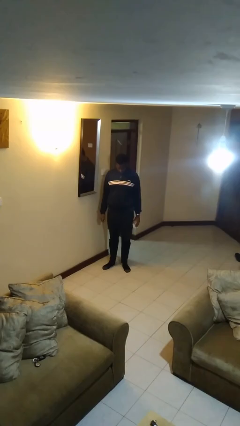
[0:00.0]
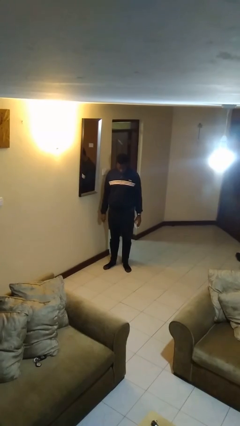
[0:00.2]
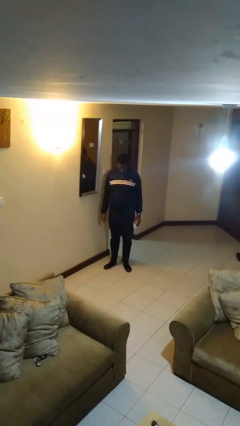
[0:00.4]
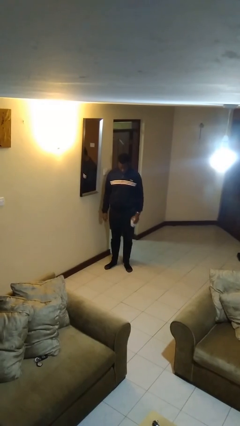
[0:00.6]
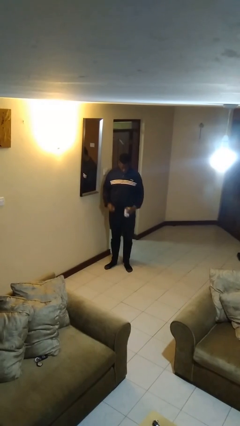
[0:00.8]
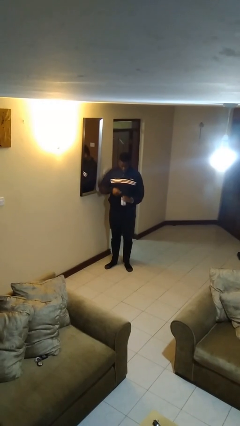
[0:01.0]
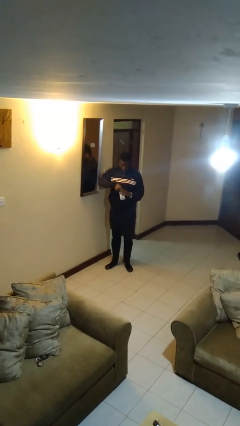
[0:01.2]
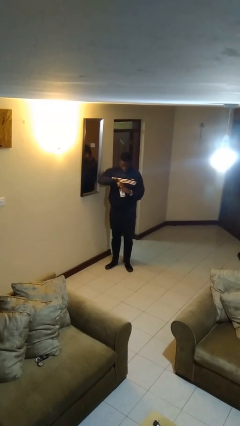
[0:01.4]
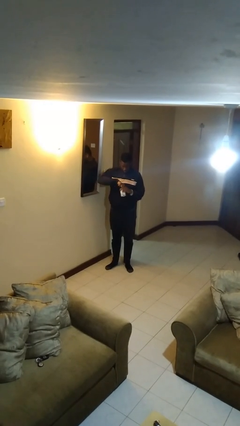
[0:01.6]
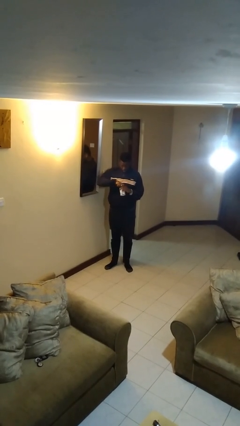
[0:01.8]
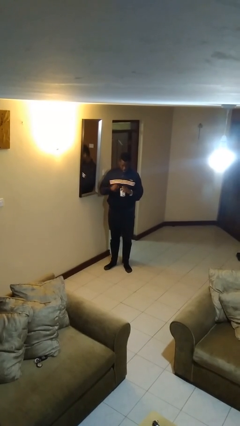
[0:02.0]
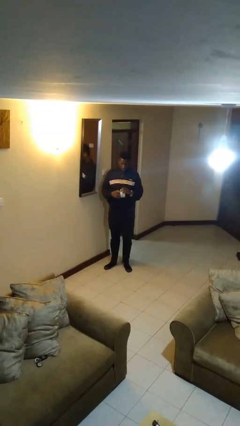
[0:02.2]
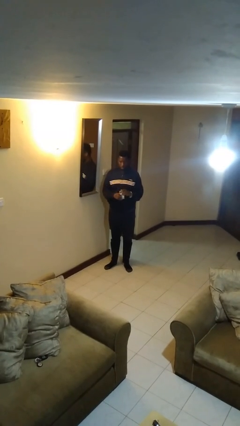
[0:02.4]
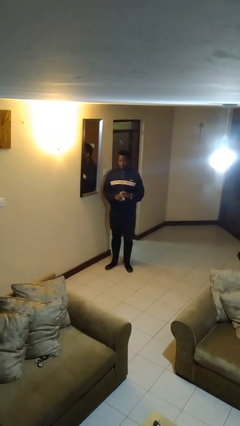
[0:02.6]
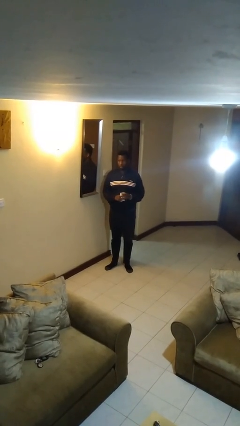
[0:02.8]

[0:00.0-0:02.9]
person opens beverage can

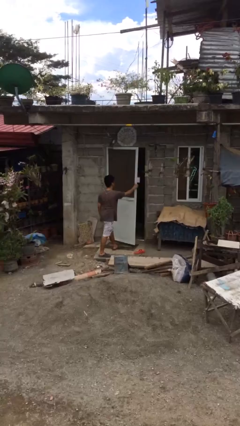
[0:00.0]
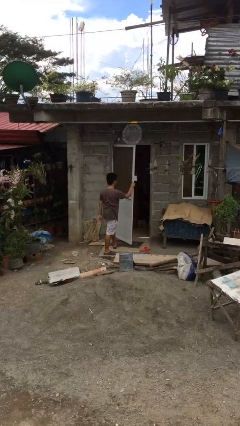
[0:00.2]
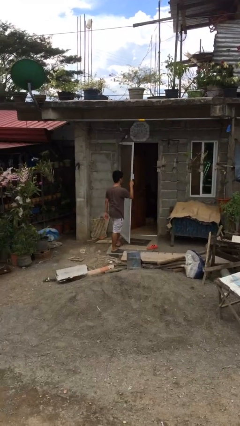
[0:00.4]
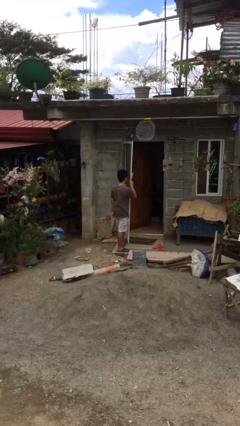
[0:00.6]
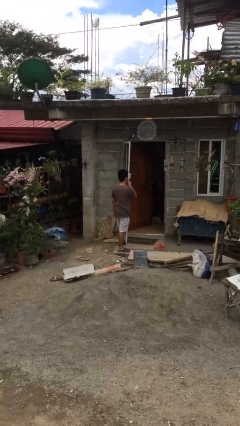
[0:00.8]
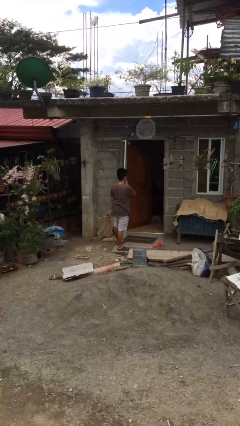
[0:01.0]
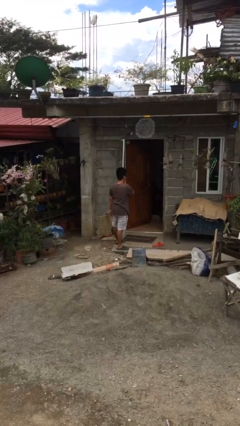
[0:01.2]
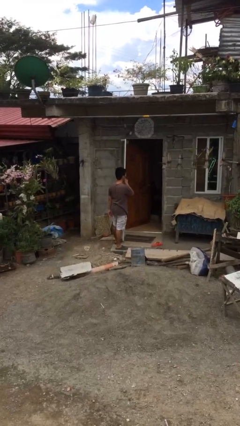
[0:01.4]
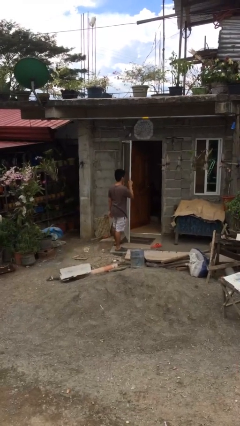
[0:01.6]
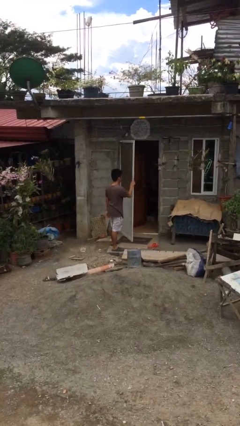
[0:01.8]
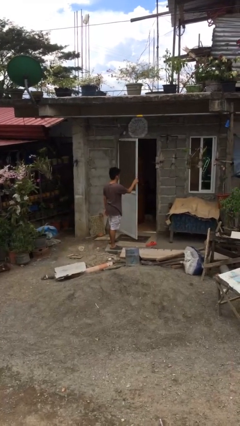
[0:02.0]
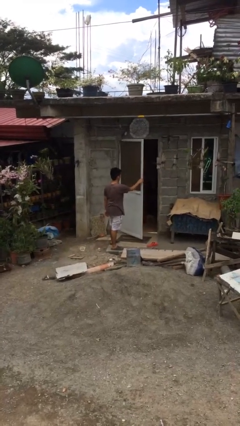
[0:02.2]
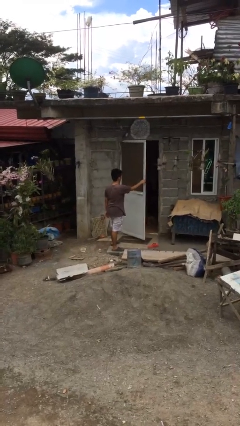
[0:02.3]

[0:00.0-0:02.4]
person opens facility door

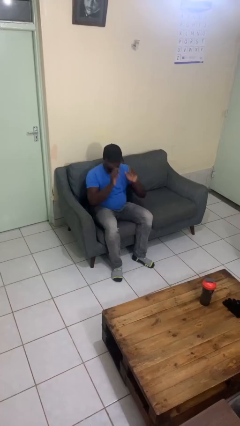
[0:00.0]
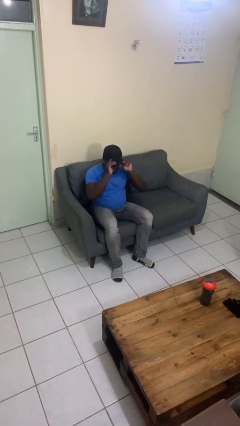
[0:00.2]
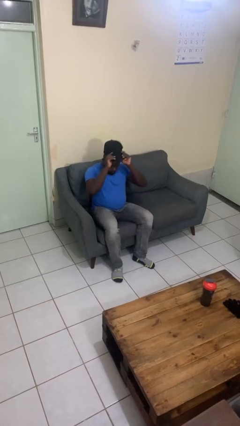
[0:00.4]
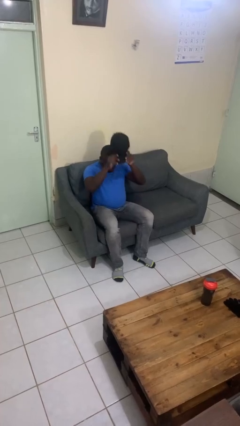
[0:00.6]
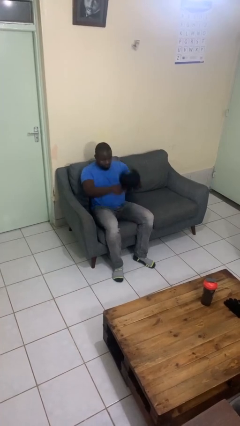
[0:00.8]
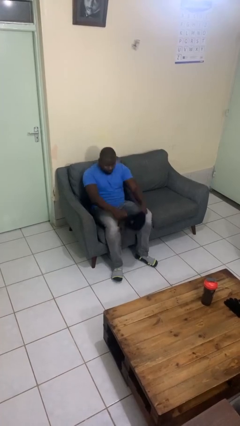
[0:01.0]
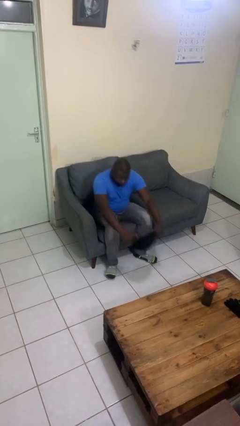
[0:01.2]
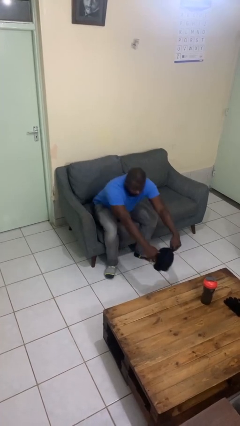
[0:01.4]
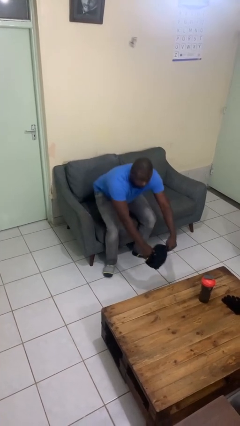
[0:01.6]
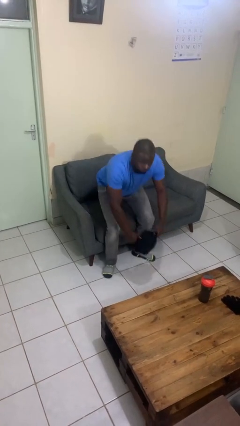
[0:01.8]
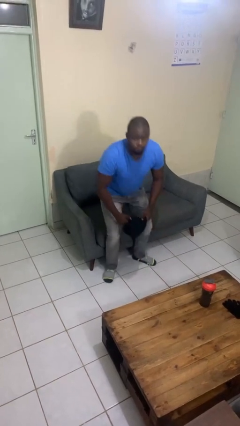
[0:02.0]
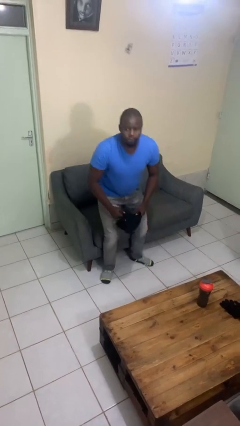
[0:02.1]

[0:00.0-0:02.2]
person takes off hat

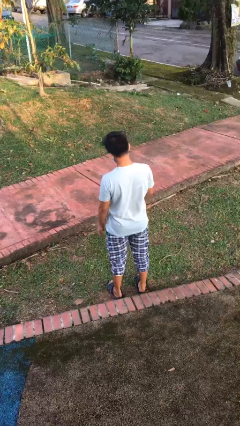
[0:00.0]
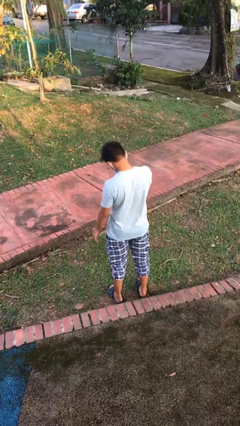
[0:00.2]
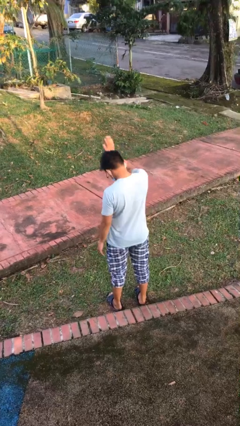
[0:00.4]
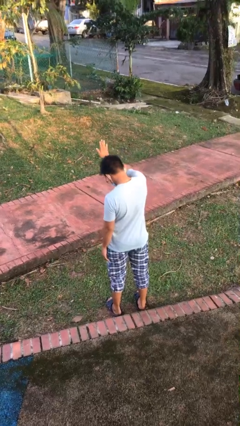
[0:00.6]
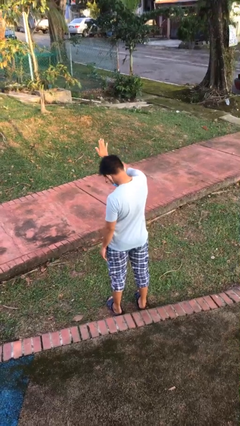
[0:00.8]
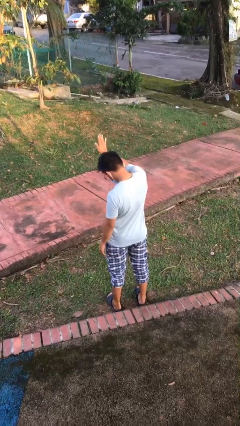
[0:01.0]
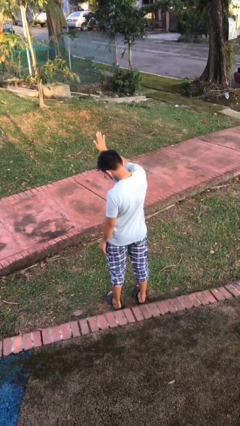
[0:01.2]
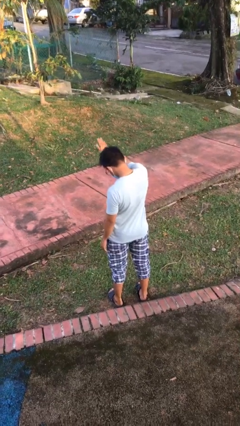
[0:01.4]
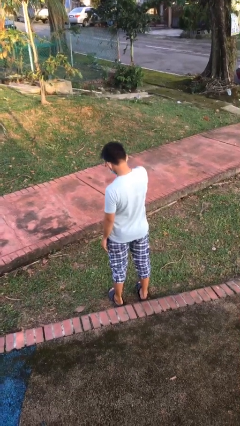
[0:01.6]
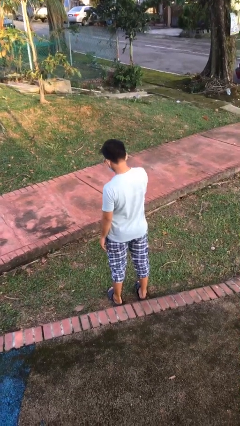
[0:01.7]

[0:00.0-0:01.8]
person gestures stop

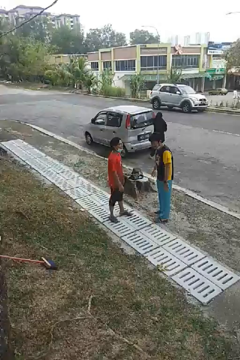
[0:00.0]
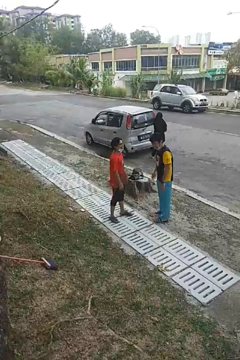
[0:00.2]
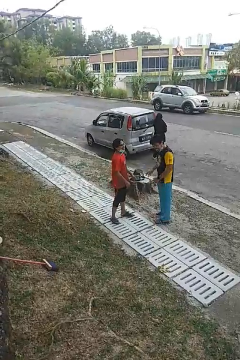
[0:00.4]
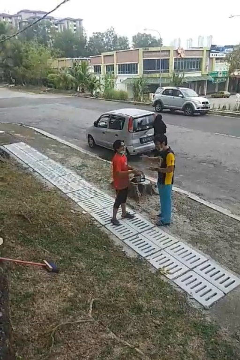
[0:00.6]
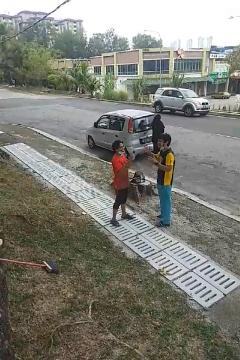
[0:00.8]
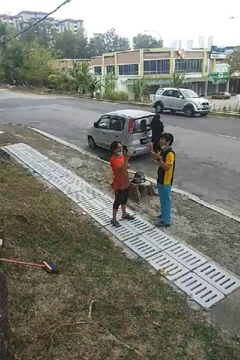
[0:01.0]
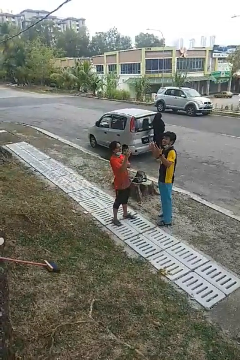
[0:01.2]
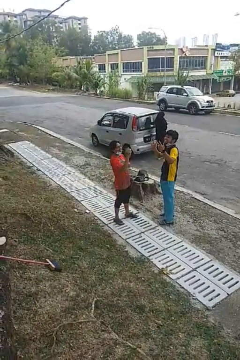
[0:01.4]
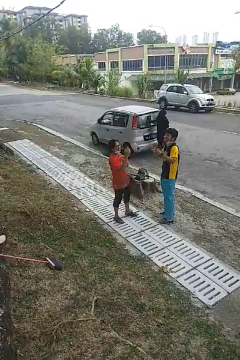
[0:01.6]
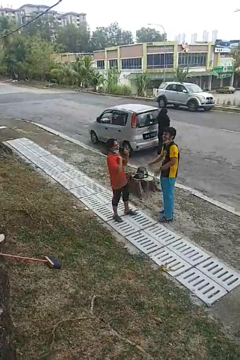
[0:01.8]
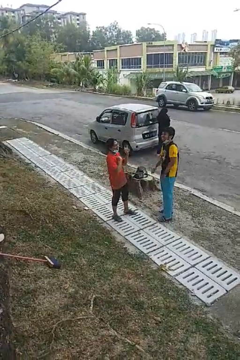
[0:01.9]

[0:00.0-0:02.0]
person laughs with person

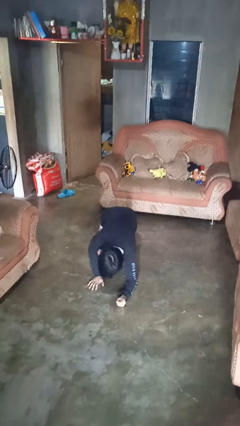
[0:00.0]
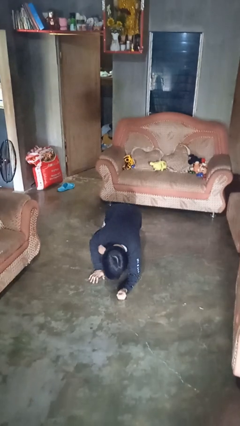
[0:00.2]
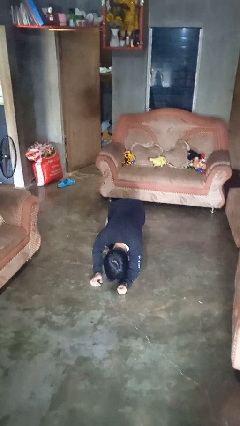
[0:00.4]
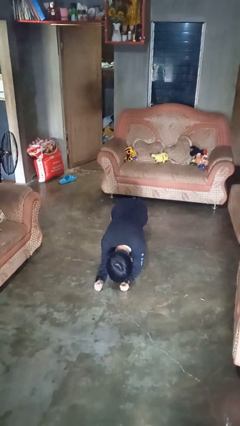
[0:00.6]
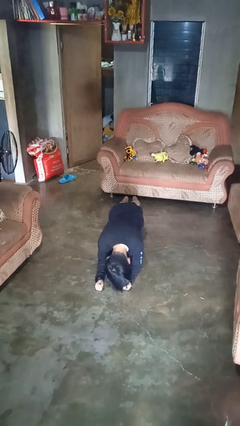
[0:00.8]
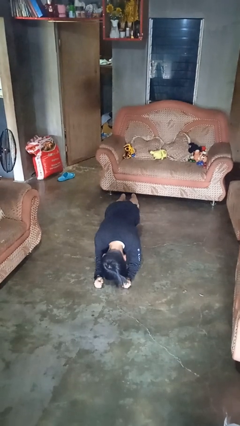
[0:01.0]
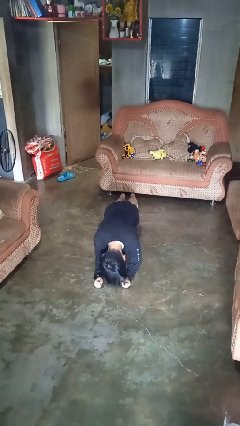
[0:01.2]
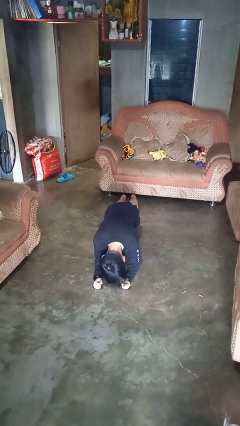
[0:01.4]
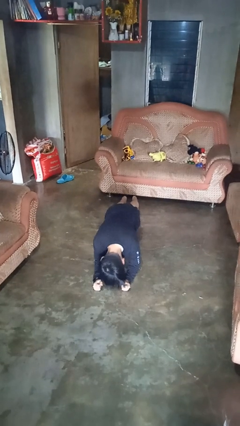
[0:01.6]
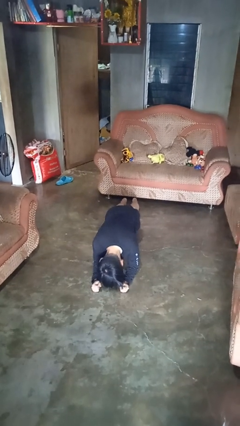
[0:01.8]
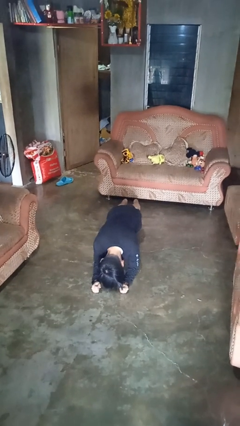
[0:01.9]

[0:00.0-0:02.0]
person exercises with plank

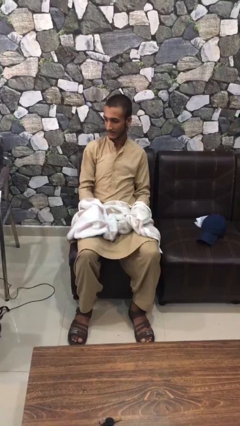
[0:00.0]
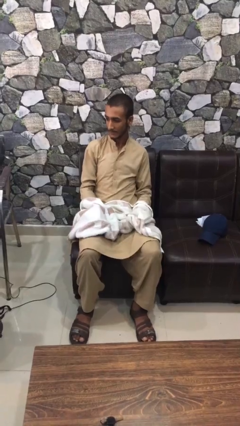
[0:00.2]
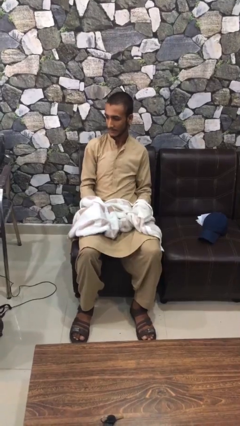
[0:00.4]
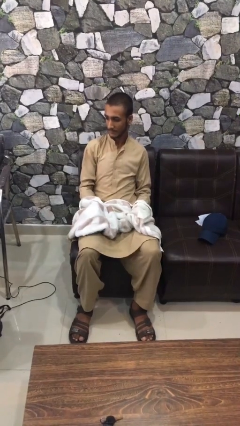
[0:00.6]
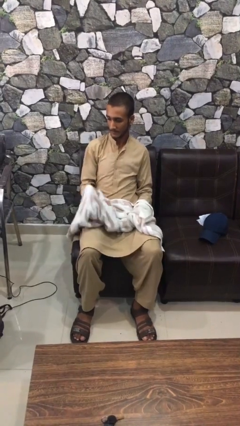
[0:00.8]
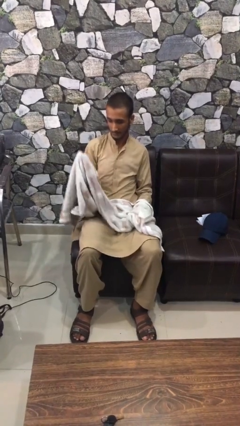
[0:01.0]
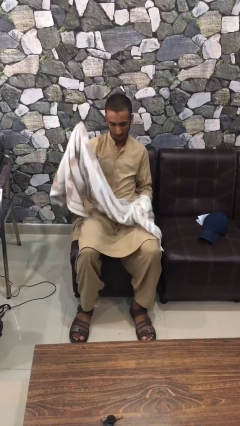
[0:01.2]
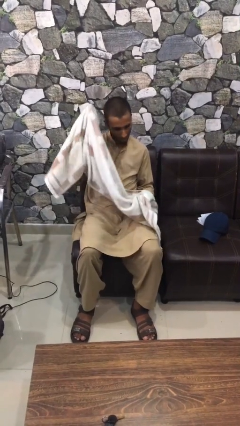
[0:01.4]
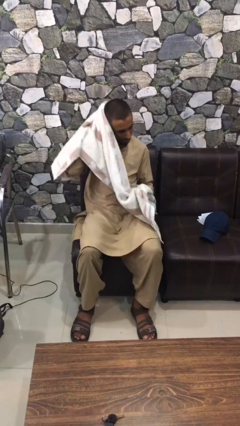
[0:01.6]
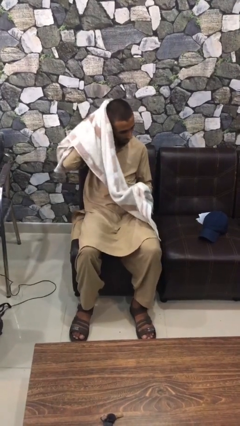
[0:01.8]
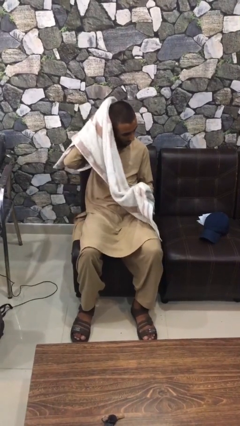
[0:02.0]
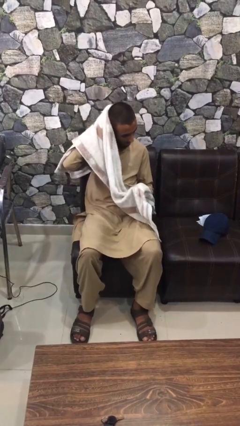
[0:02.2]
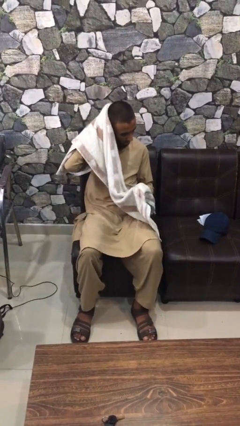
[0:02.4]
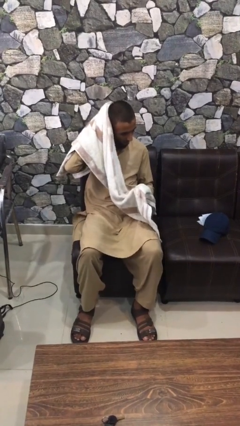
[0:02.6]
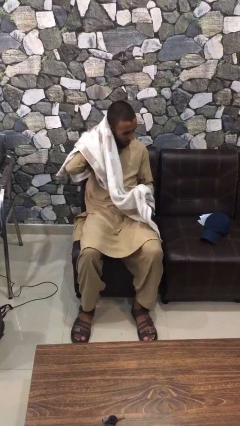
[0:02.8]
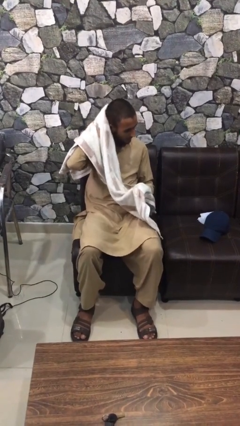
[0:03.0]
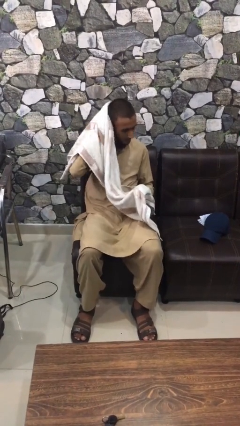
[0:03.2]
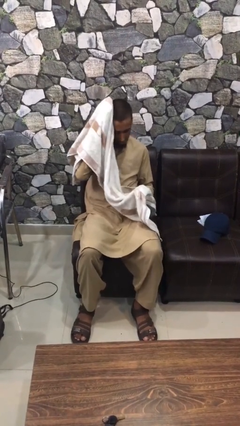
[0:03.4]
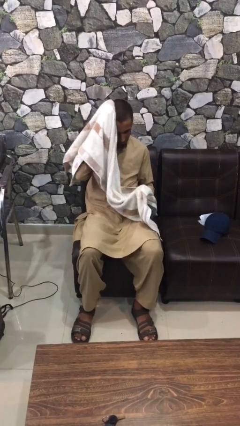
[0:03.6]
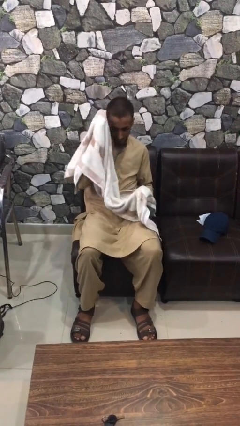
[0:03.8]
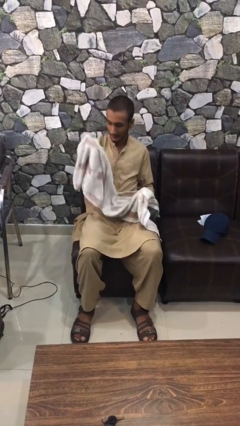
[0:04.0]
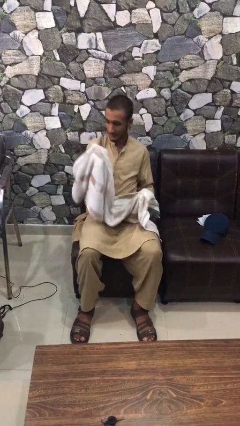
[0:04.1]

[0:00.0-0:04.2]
person dries hair with towel
